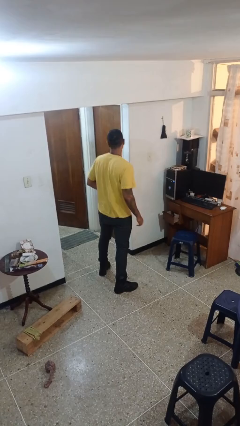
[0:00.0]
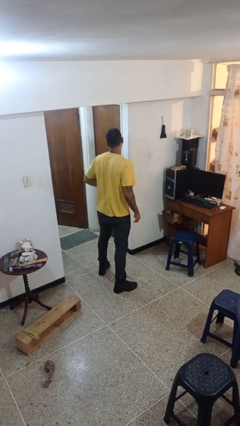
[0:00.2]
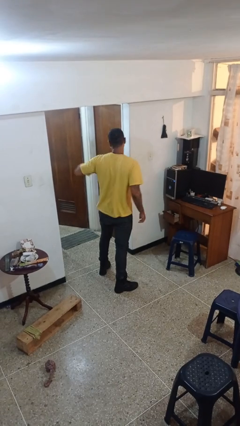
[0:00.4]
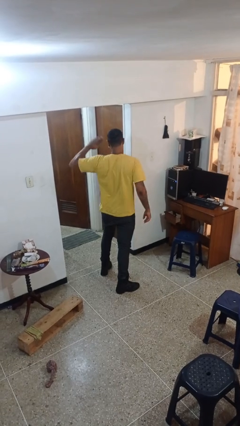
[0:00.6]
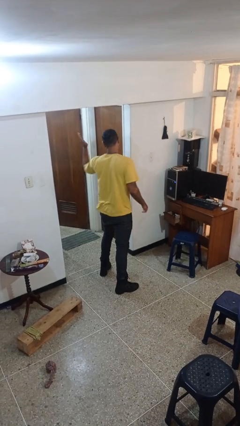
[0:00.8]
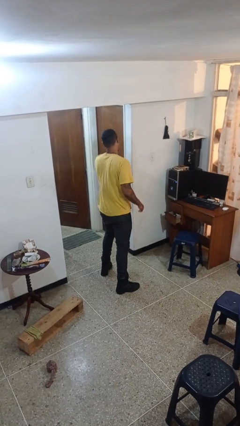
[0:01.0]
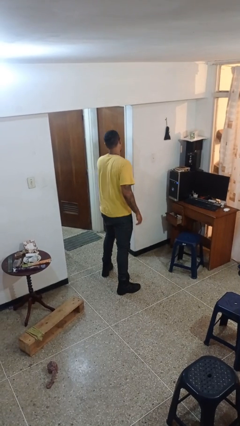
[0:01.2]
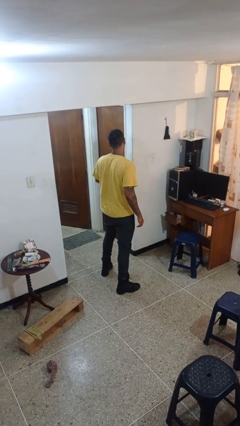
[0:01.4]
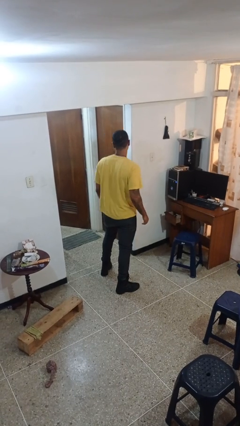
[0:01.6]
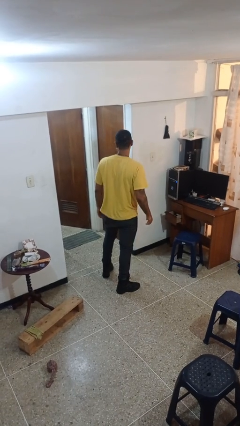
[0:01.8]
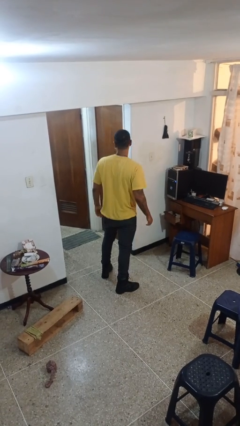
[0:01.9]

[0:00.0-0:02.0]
person karate chop

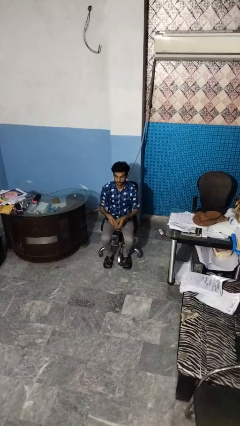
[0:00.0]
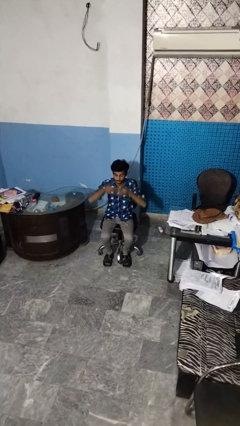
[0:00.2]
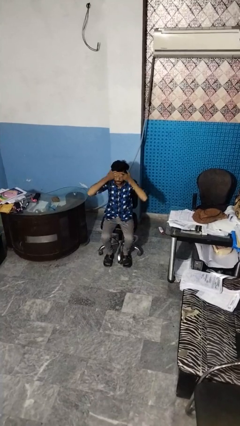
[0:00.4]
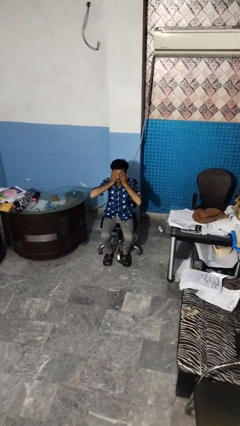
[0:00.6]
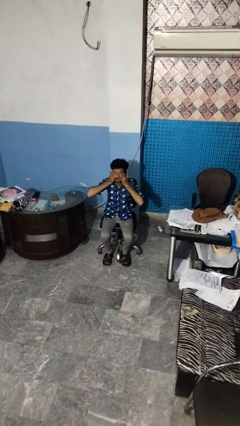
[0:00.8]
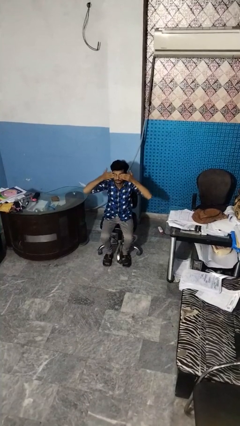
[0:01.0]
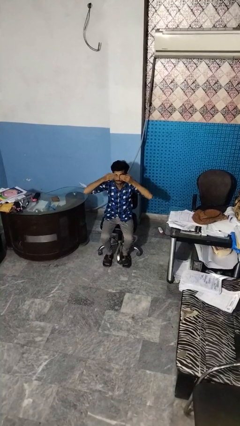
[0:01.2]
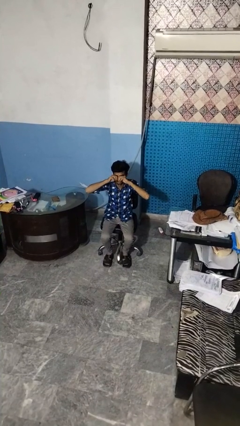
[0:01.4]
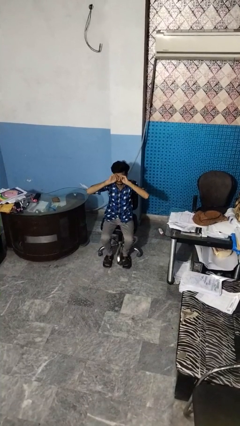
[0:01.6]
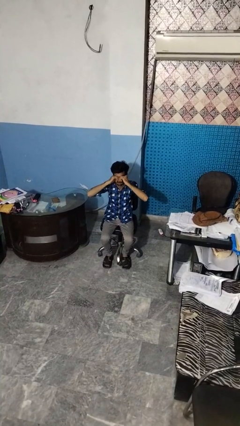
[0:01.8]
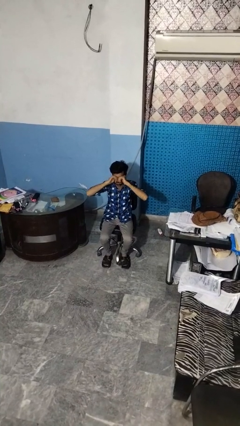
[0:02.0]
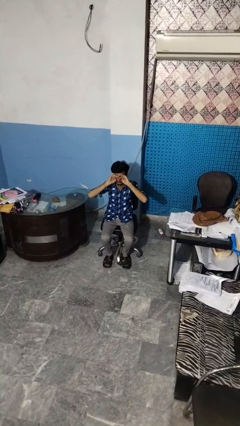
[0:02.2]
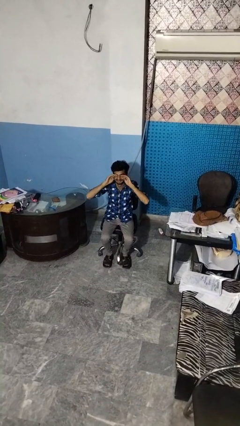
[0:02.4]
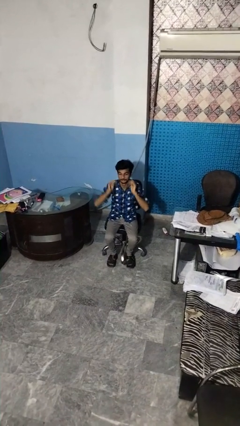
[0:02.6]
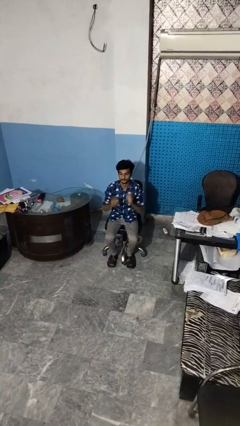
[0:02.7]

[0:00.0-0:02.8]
person rubs eyes

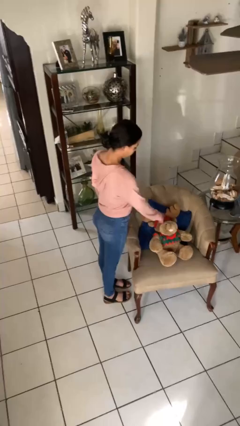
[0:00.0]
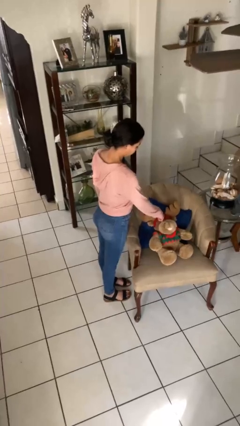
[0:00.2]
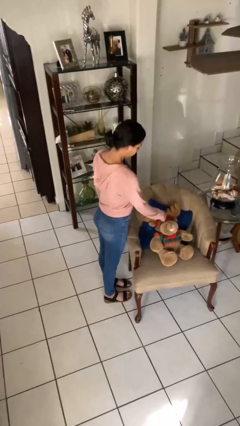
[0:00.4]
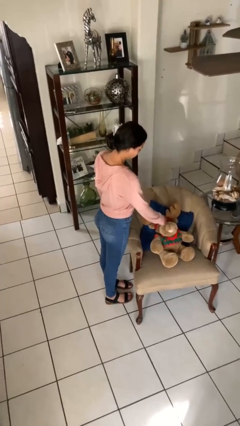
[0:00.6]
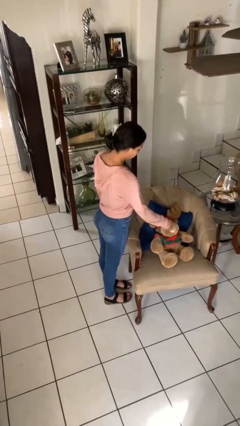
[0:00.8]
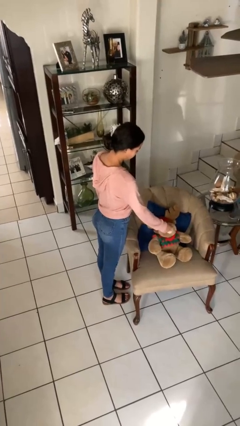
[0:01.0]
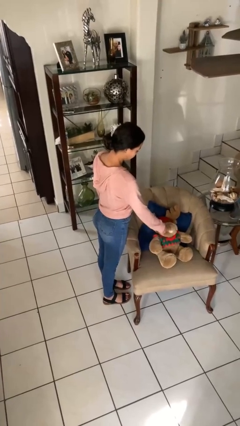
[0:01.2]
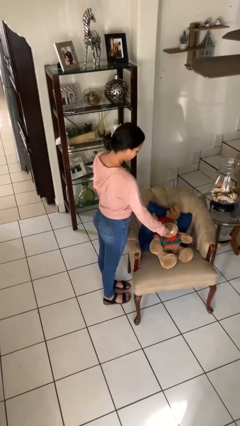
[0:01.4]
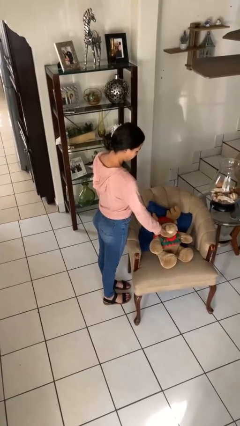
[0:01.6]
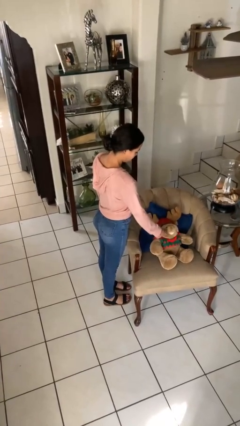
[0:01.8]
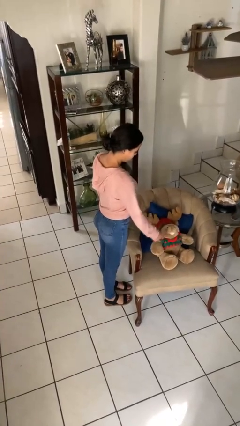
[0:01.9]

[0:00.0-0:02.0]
person taps object with finger

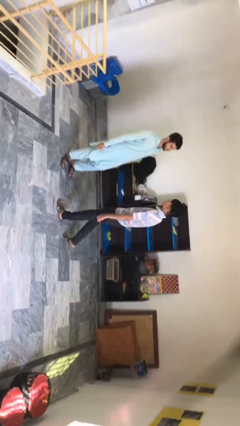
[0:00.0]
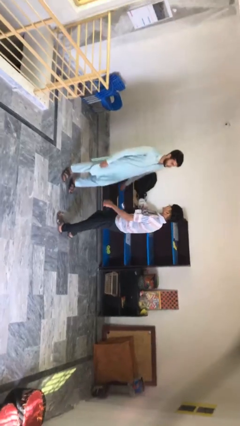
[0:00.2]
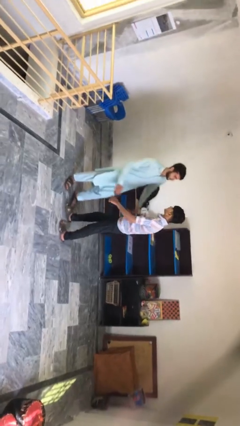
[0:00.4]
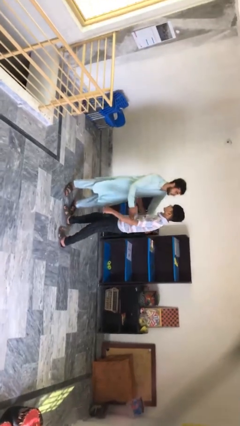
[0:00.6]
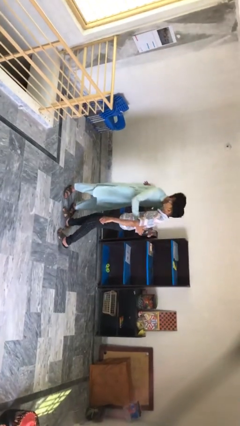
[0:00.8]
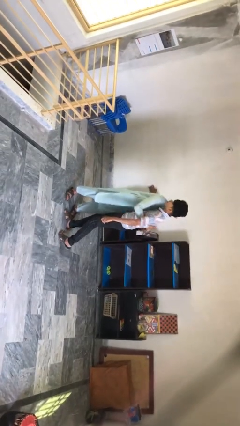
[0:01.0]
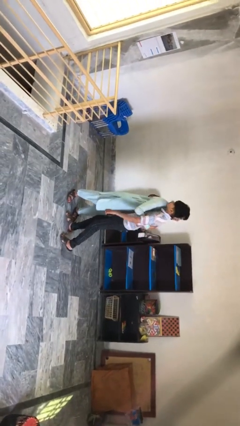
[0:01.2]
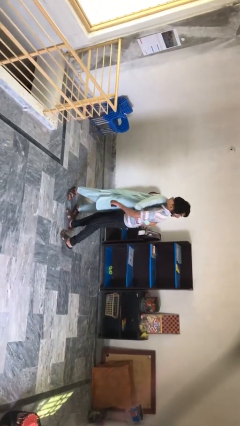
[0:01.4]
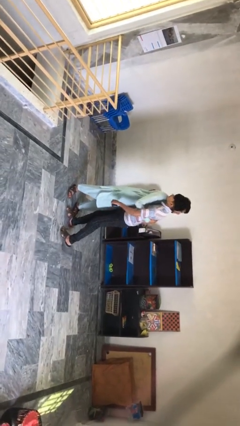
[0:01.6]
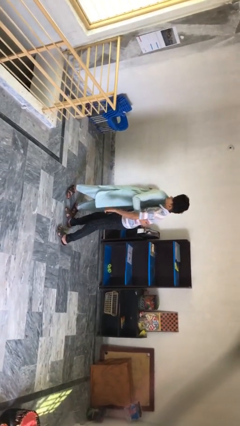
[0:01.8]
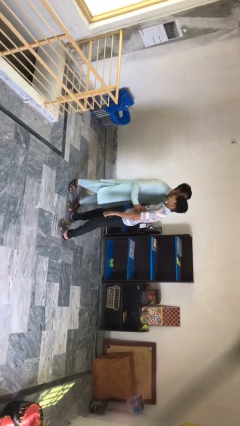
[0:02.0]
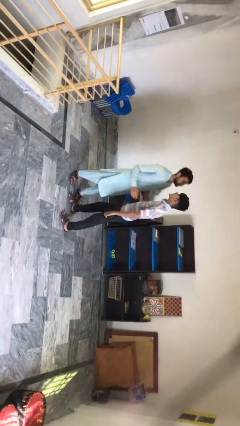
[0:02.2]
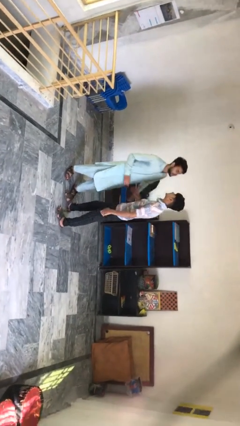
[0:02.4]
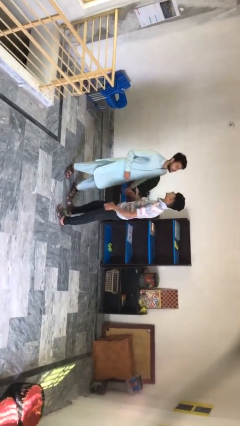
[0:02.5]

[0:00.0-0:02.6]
person embraces person

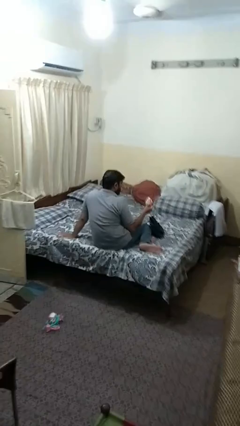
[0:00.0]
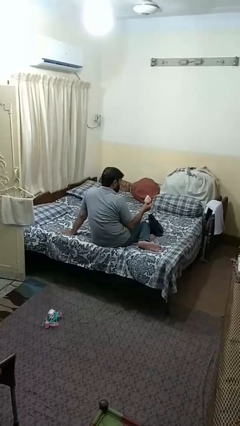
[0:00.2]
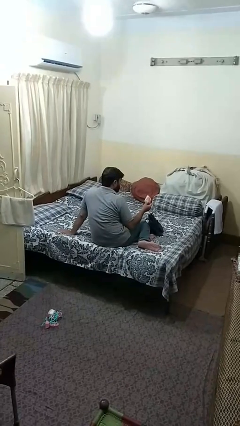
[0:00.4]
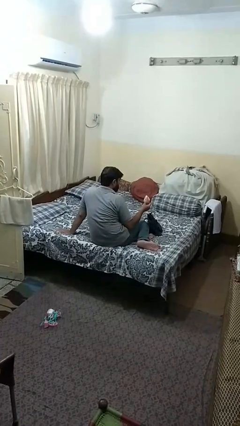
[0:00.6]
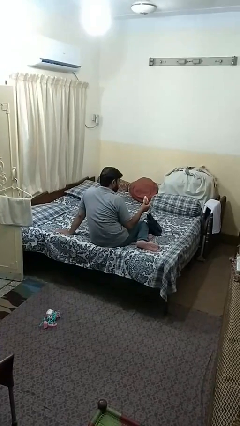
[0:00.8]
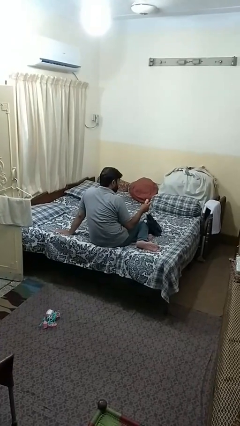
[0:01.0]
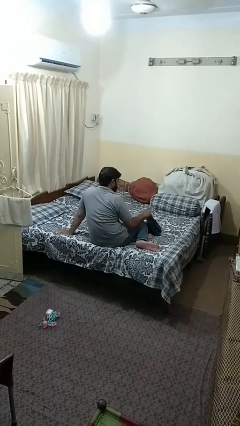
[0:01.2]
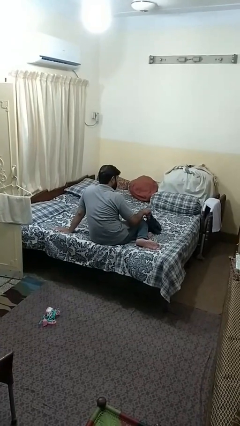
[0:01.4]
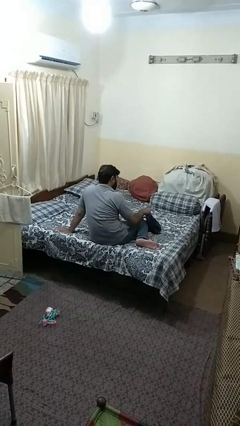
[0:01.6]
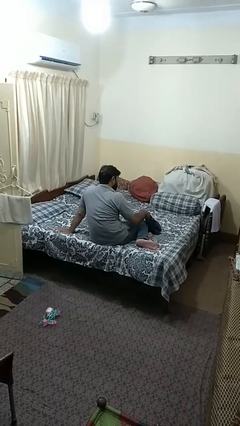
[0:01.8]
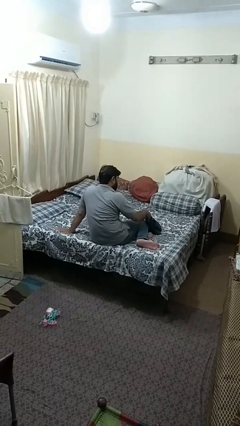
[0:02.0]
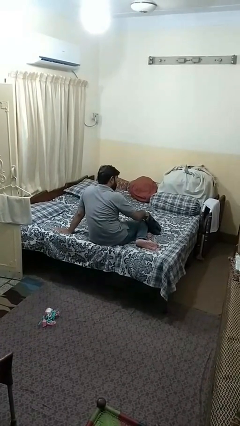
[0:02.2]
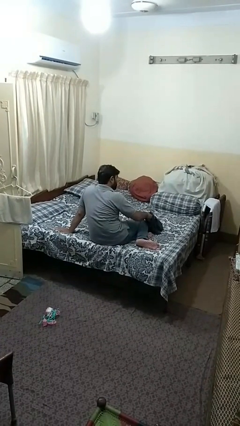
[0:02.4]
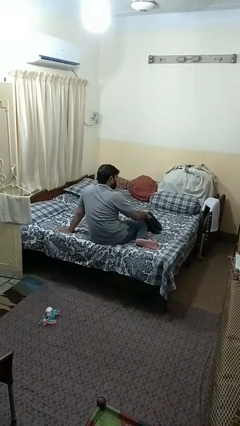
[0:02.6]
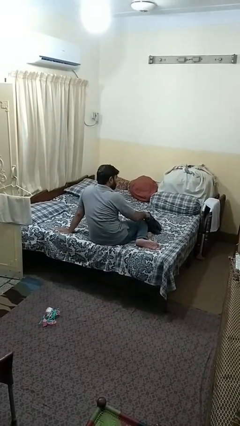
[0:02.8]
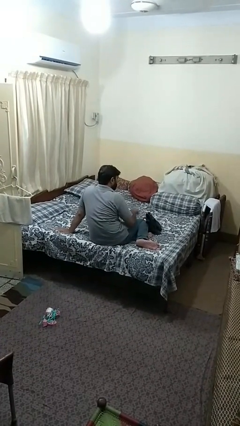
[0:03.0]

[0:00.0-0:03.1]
person puts object into purse

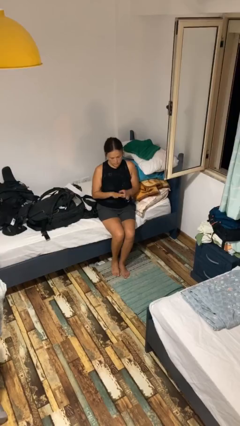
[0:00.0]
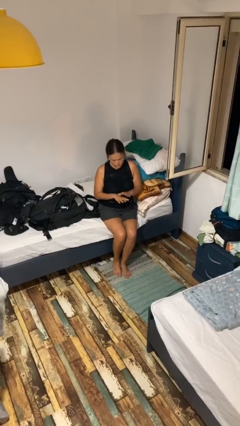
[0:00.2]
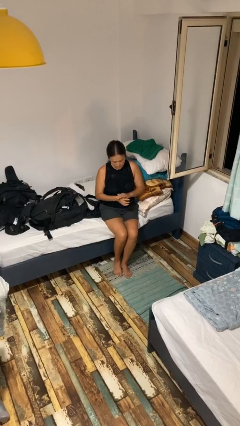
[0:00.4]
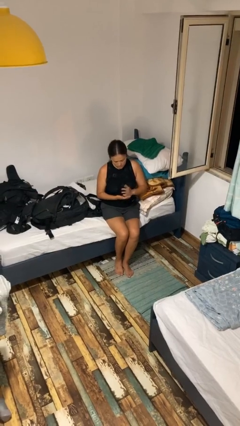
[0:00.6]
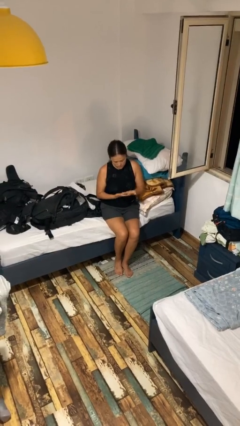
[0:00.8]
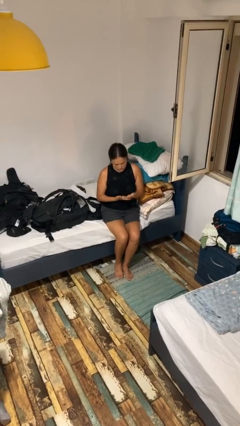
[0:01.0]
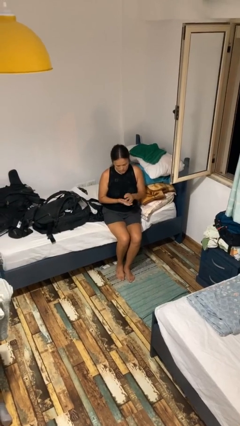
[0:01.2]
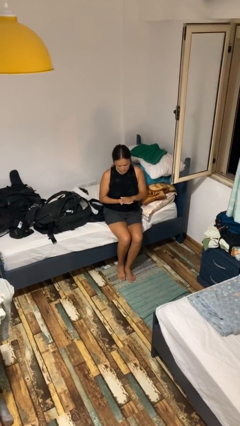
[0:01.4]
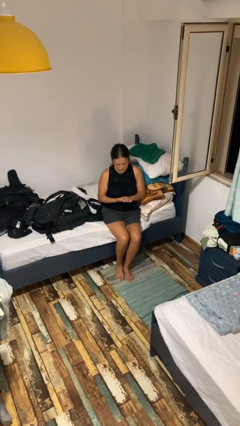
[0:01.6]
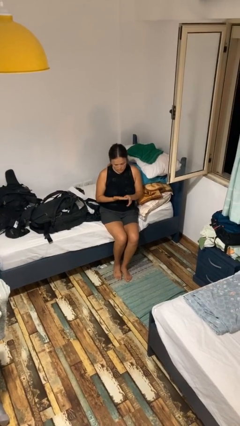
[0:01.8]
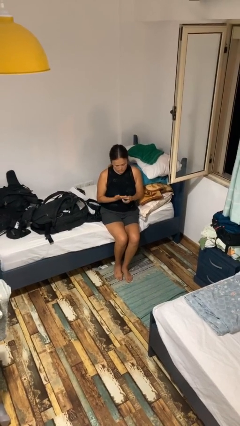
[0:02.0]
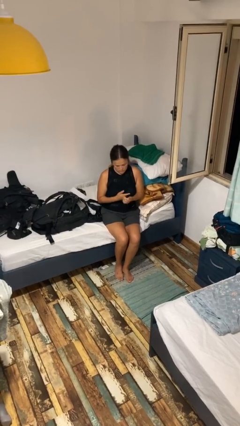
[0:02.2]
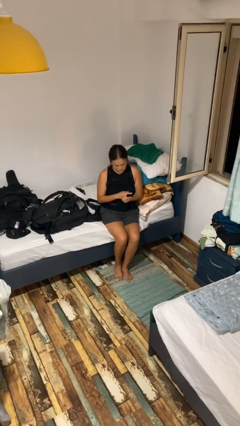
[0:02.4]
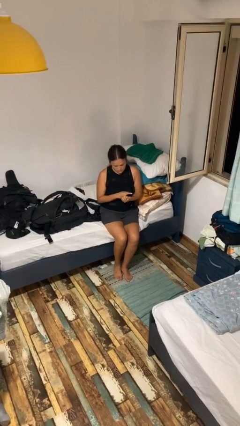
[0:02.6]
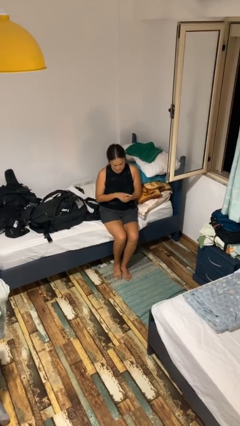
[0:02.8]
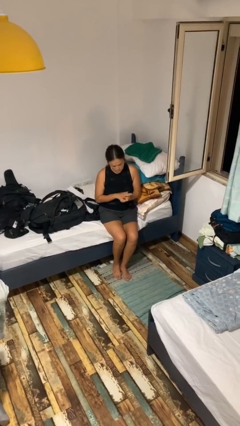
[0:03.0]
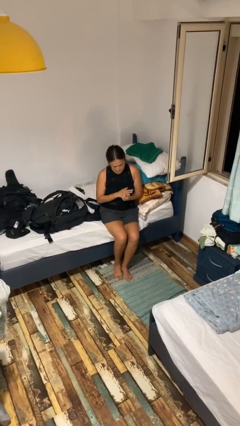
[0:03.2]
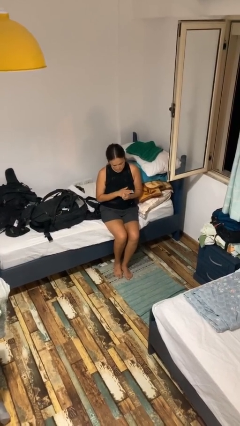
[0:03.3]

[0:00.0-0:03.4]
person looks at hands in lap

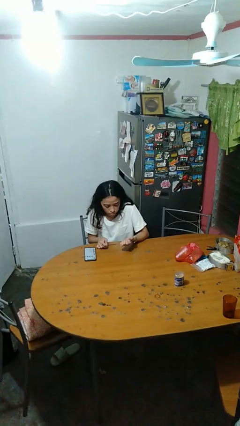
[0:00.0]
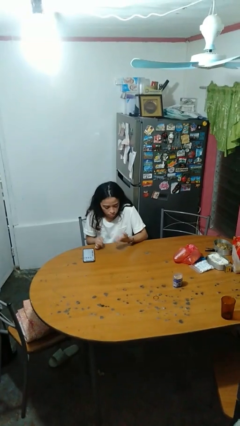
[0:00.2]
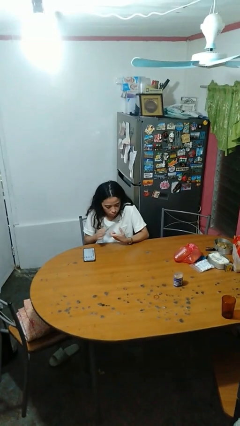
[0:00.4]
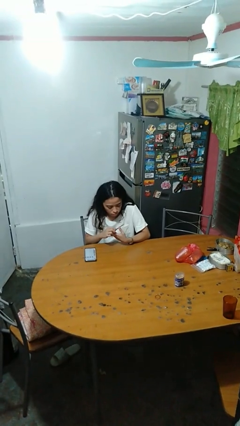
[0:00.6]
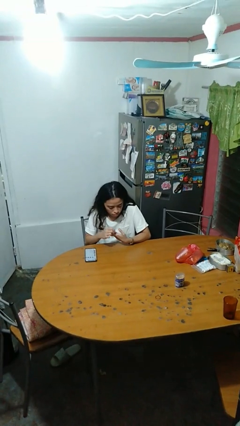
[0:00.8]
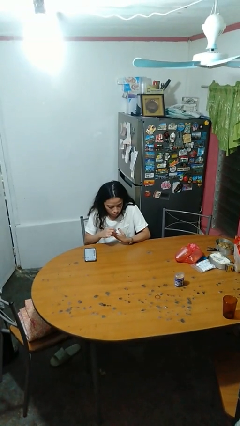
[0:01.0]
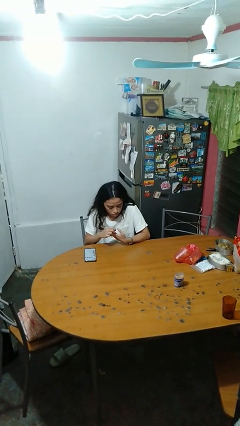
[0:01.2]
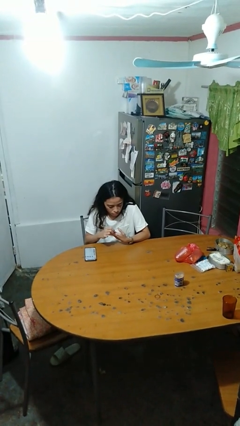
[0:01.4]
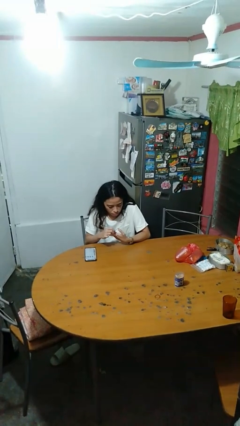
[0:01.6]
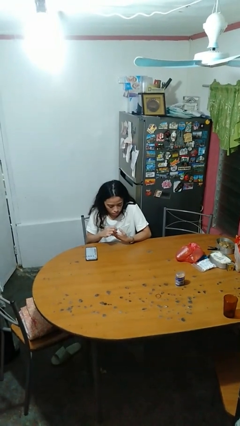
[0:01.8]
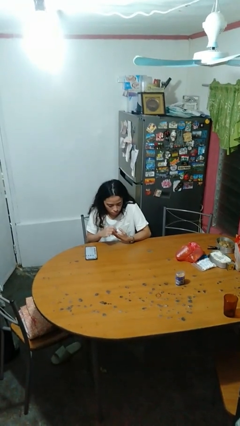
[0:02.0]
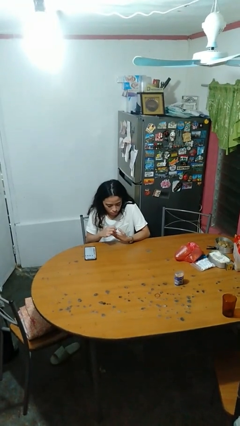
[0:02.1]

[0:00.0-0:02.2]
person files fingernails
